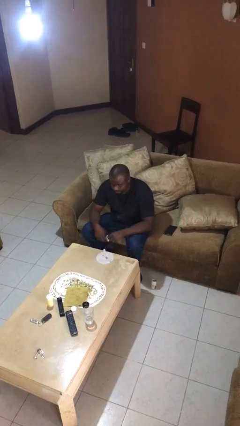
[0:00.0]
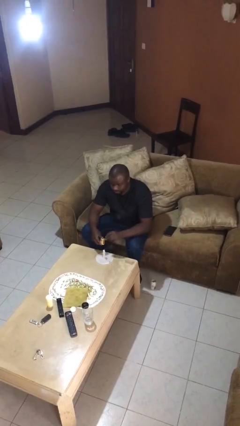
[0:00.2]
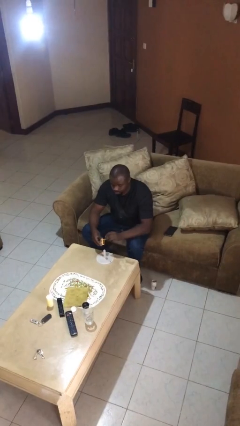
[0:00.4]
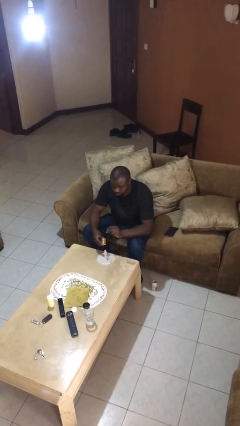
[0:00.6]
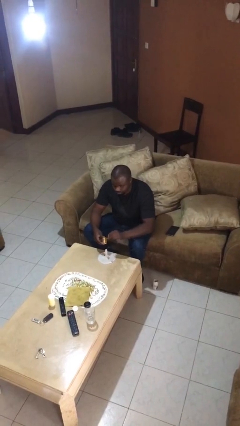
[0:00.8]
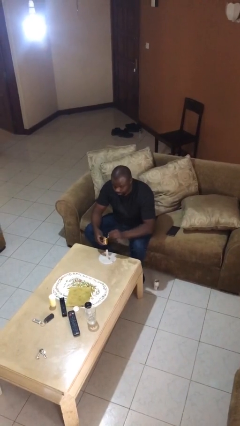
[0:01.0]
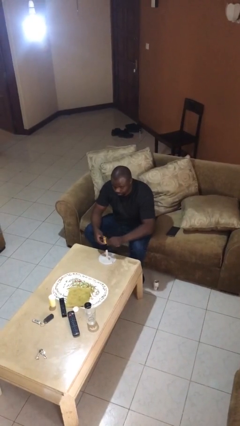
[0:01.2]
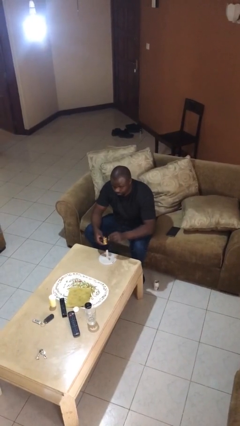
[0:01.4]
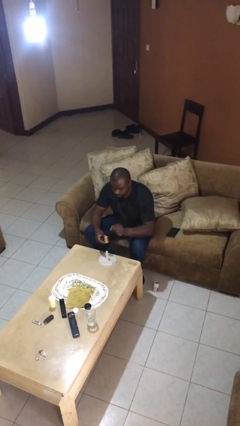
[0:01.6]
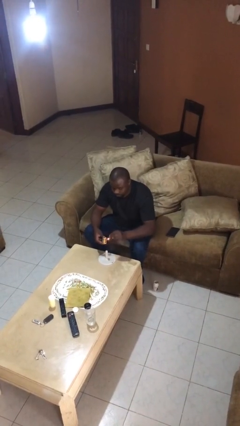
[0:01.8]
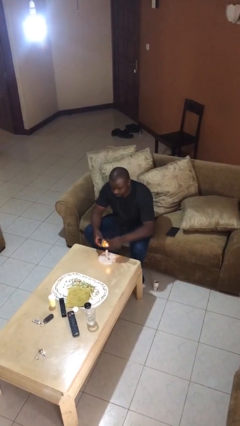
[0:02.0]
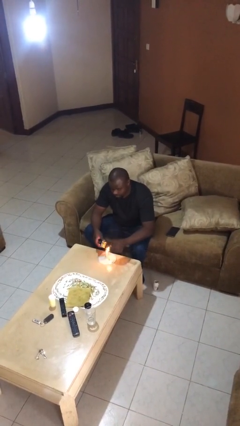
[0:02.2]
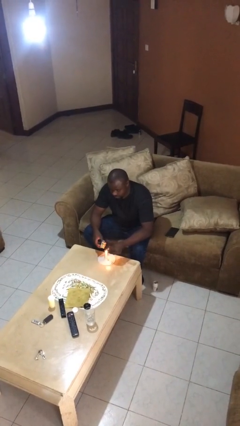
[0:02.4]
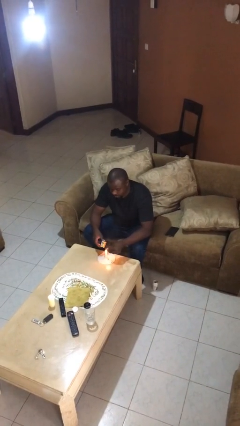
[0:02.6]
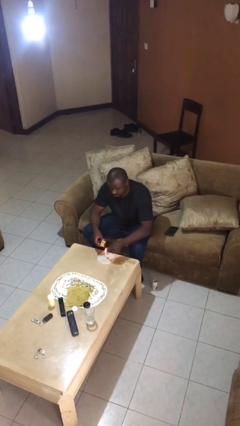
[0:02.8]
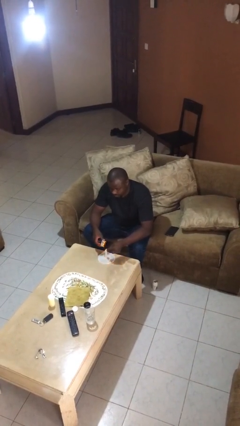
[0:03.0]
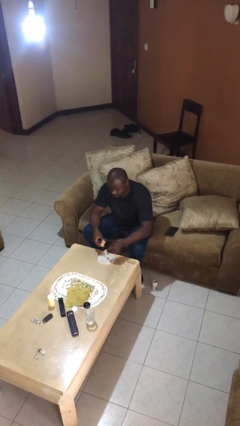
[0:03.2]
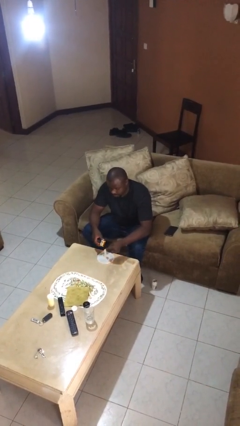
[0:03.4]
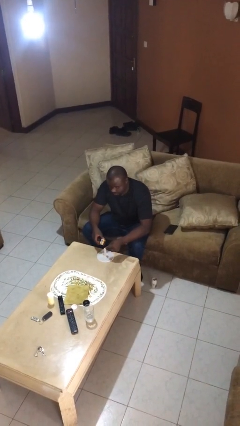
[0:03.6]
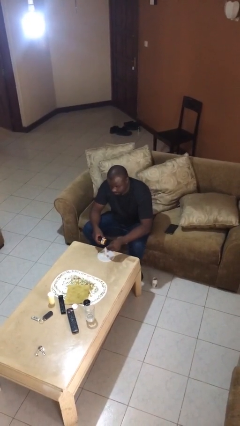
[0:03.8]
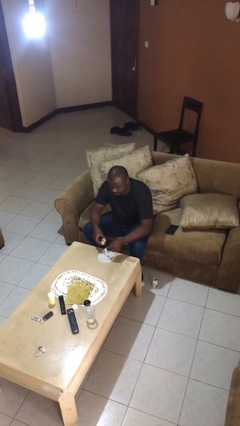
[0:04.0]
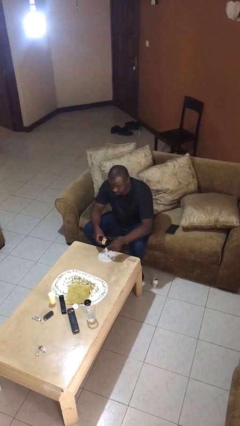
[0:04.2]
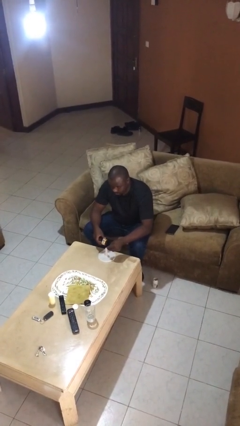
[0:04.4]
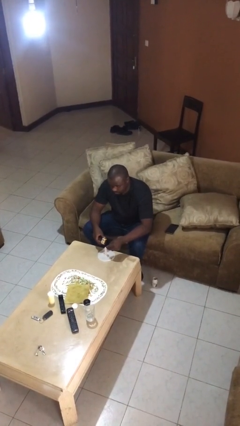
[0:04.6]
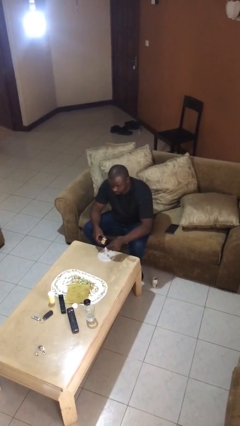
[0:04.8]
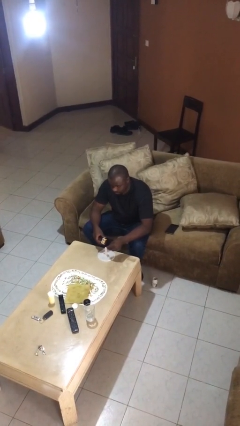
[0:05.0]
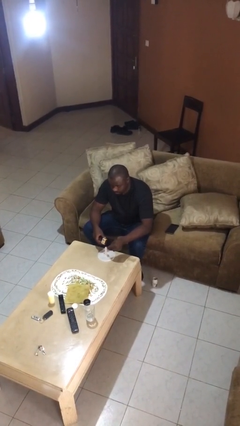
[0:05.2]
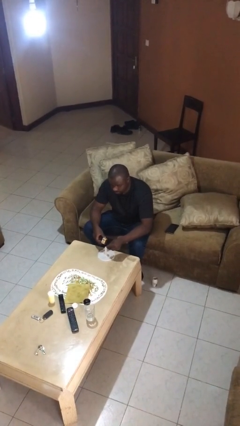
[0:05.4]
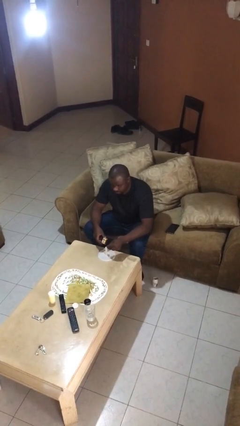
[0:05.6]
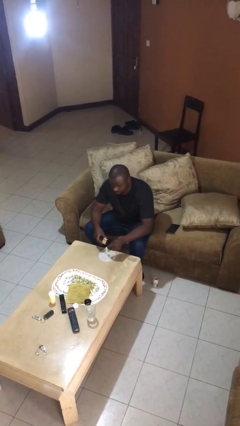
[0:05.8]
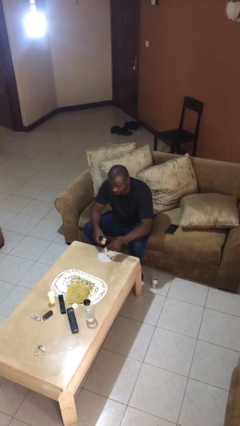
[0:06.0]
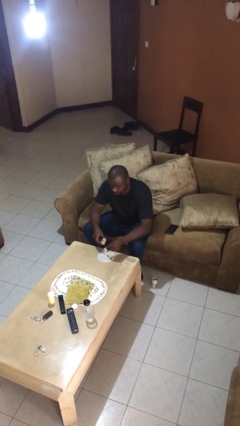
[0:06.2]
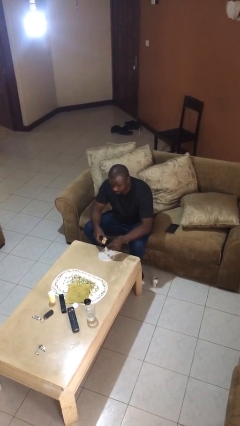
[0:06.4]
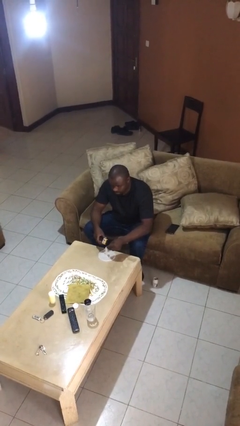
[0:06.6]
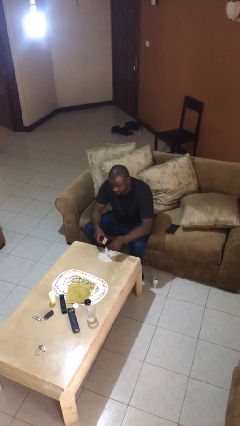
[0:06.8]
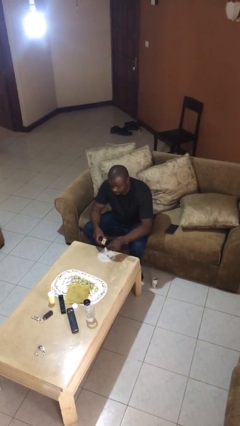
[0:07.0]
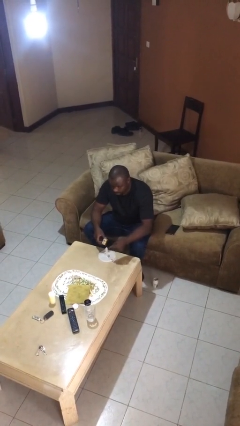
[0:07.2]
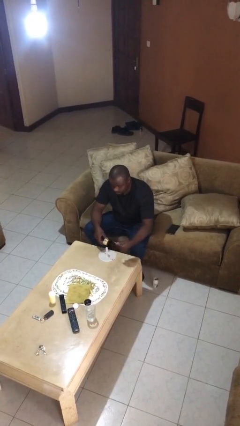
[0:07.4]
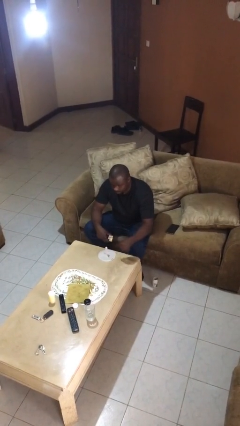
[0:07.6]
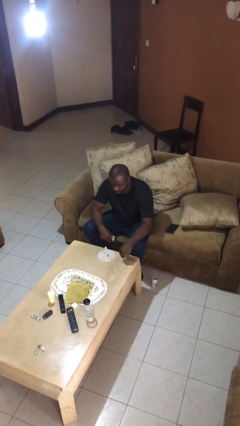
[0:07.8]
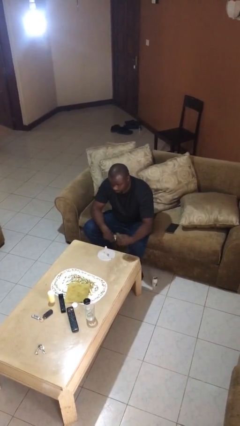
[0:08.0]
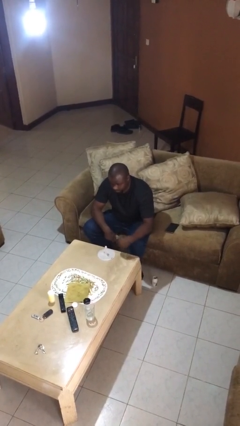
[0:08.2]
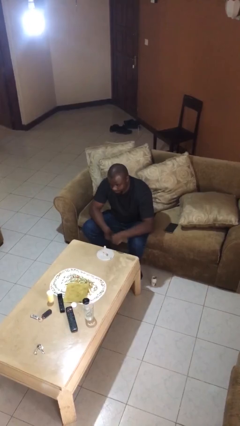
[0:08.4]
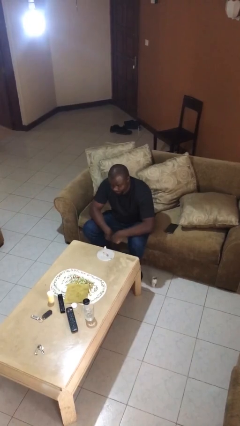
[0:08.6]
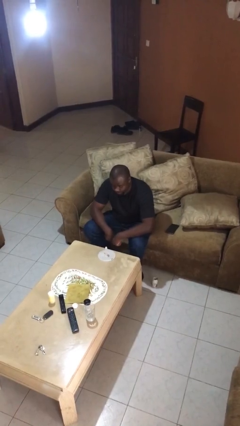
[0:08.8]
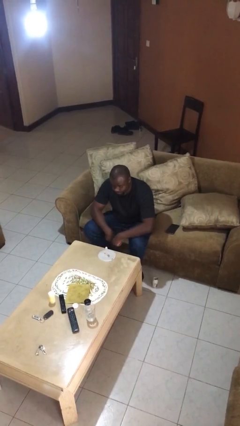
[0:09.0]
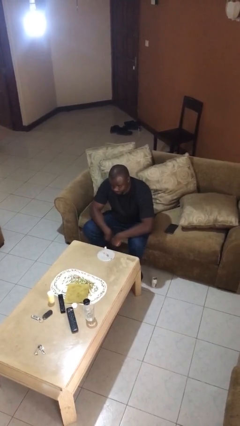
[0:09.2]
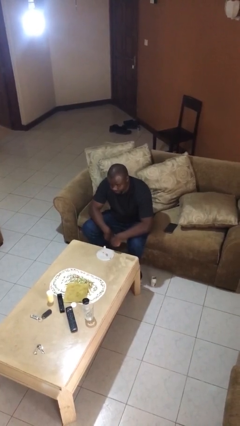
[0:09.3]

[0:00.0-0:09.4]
person lights candle

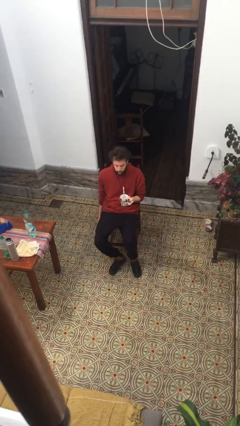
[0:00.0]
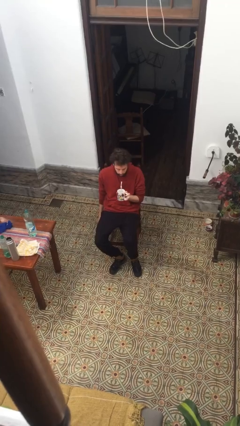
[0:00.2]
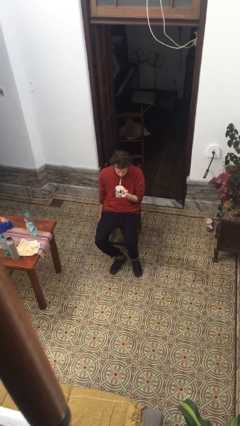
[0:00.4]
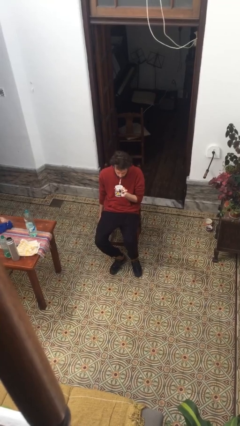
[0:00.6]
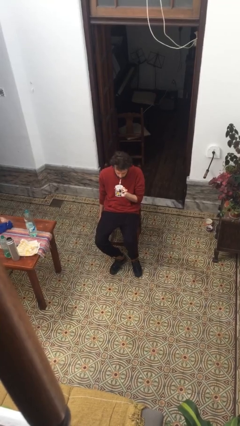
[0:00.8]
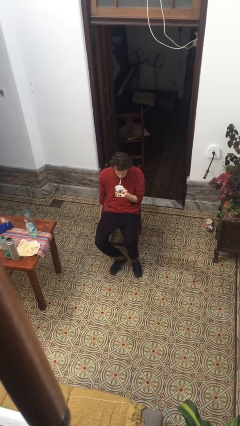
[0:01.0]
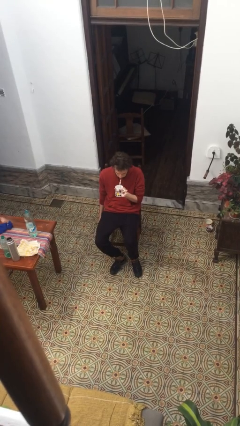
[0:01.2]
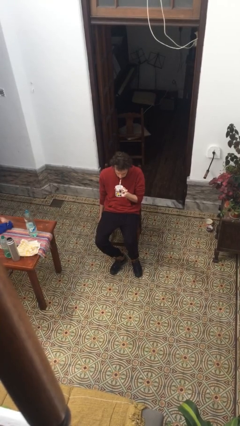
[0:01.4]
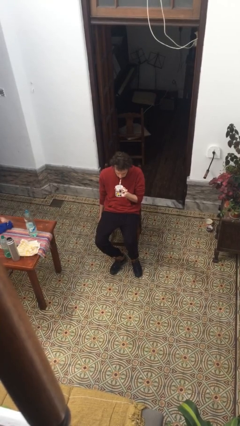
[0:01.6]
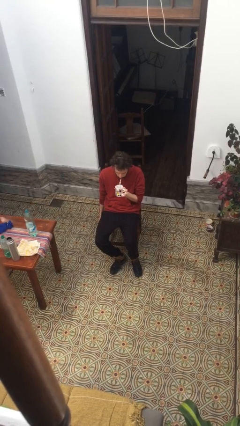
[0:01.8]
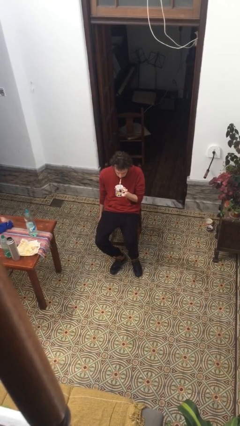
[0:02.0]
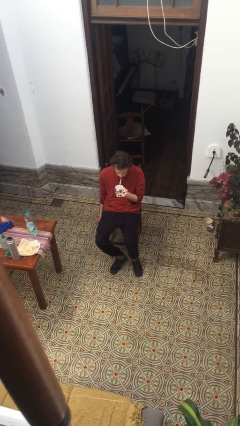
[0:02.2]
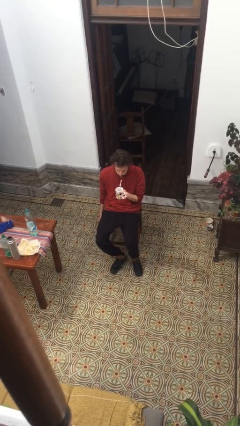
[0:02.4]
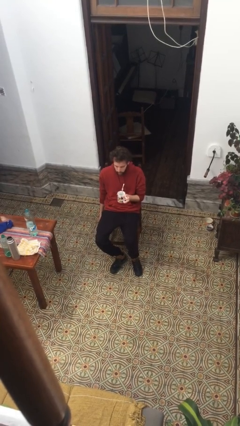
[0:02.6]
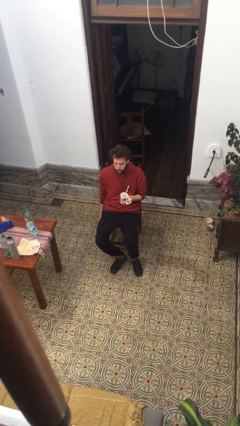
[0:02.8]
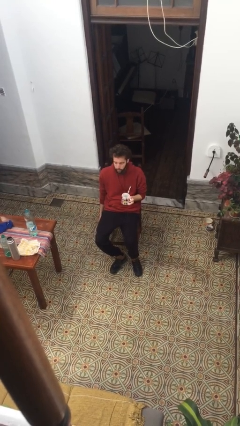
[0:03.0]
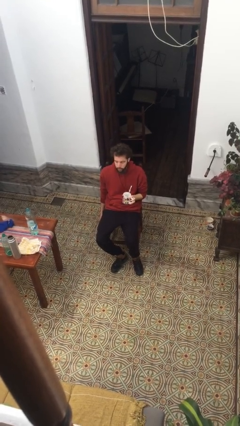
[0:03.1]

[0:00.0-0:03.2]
person drinks from straw

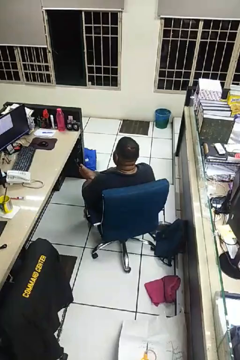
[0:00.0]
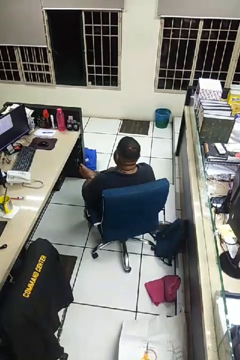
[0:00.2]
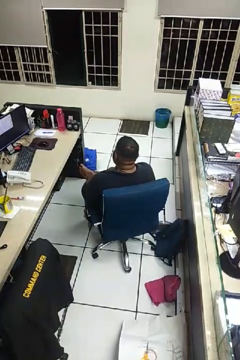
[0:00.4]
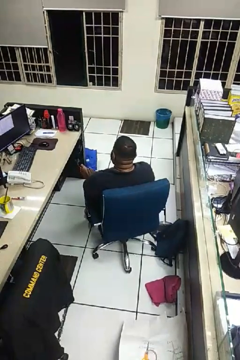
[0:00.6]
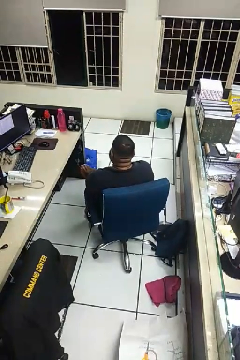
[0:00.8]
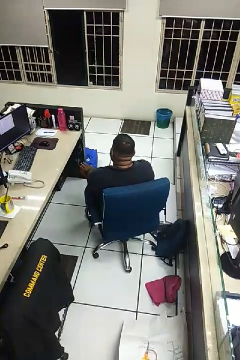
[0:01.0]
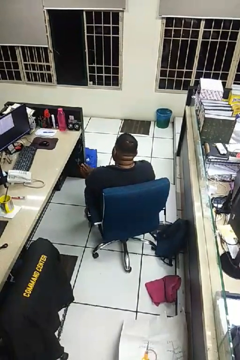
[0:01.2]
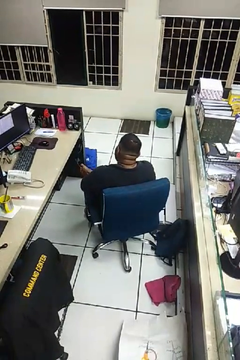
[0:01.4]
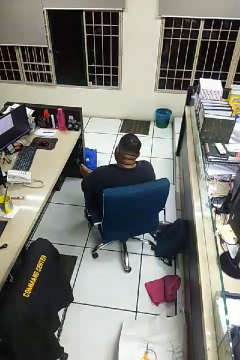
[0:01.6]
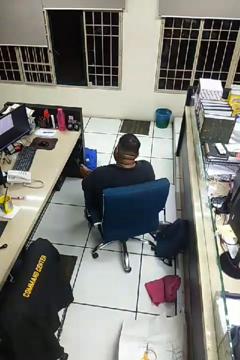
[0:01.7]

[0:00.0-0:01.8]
person rubs foot

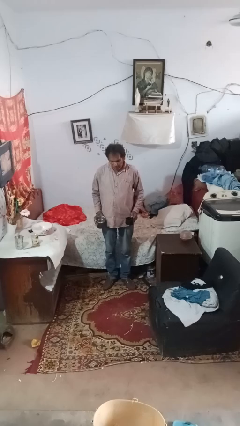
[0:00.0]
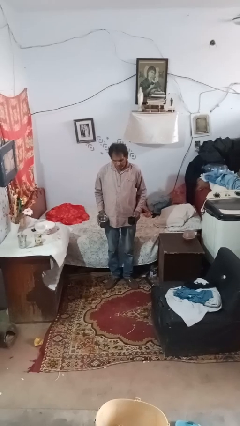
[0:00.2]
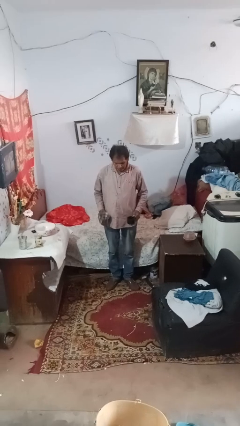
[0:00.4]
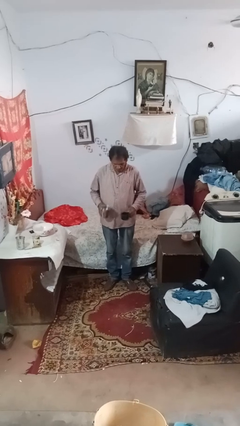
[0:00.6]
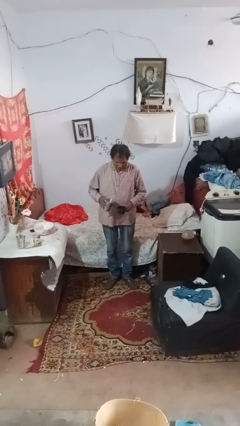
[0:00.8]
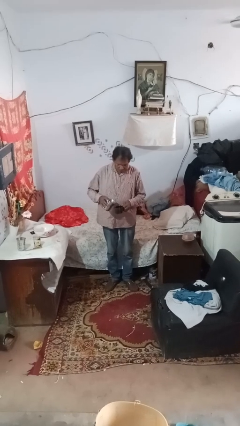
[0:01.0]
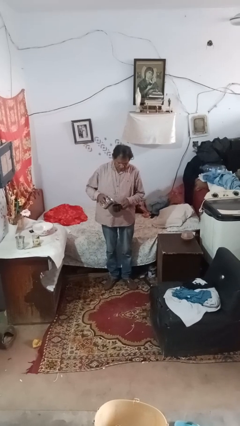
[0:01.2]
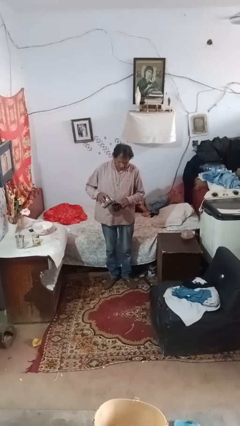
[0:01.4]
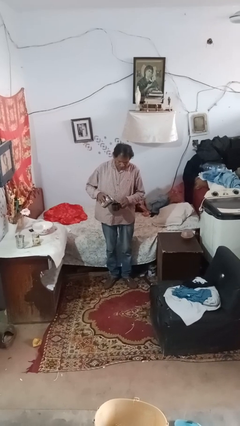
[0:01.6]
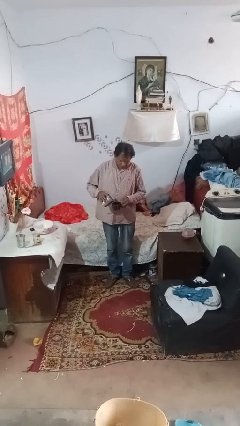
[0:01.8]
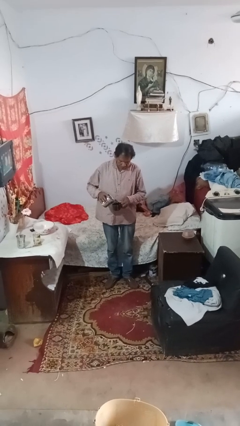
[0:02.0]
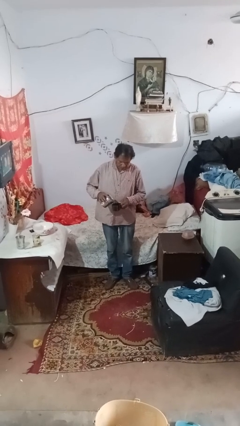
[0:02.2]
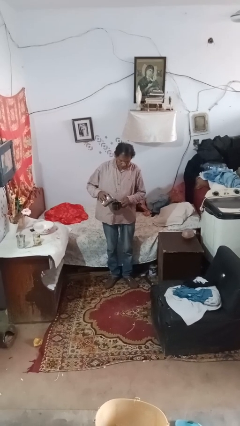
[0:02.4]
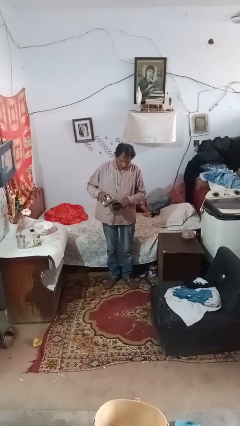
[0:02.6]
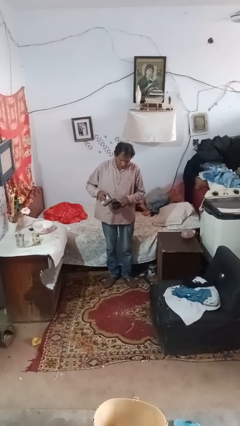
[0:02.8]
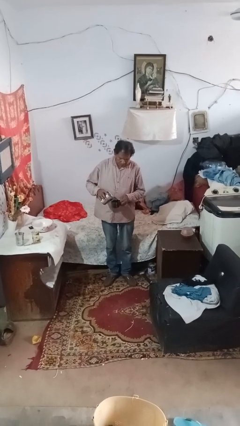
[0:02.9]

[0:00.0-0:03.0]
person pours liquid into cup

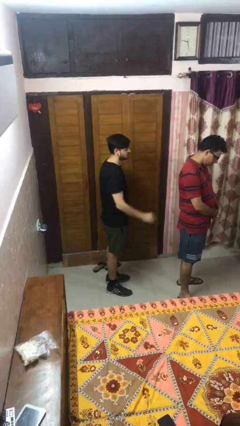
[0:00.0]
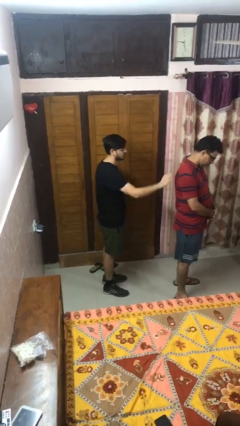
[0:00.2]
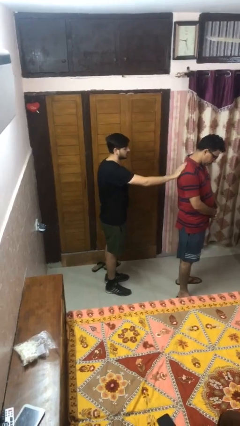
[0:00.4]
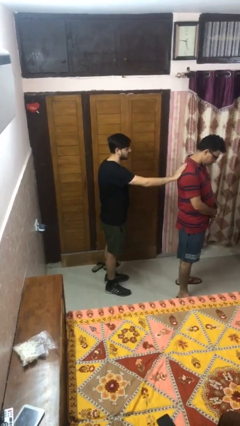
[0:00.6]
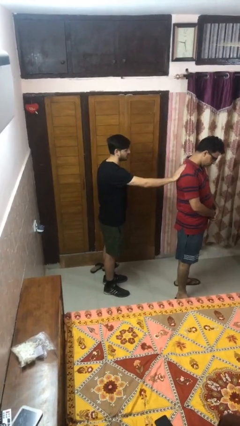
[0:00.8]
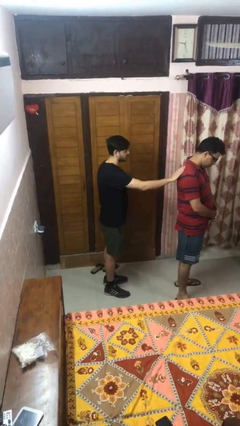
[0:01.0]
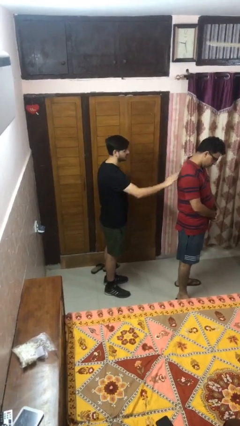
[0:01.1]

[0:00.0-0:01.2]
person touches back of person
